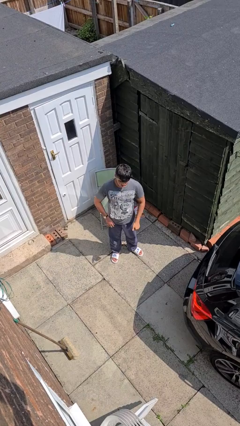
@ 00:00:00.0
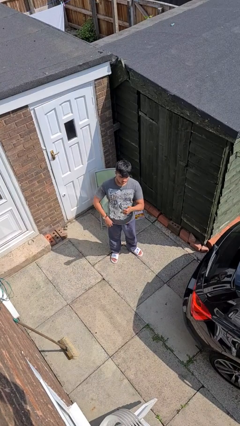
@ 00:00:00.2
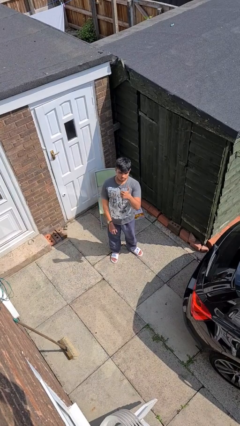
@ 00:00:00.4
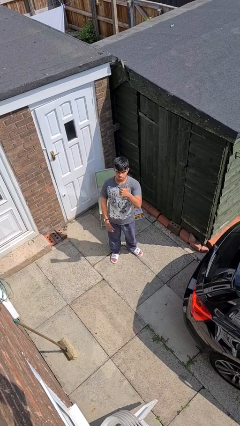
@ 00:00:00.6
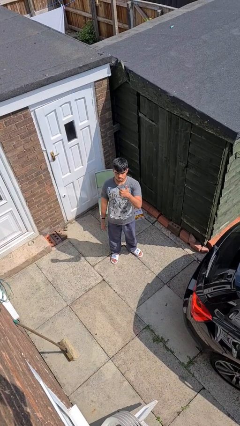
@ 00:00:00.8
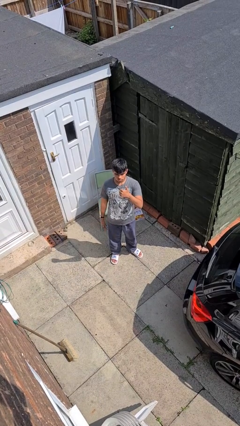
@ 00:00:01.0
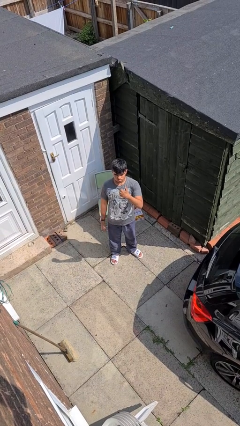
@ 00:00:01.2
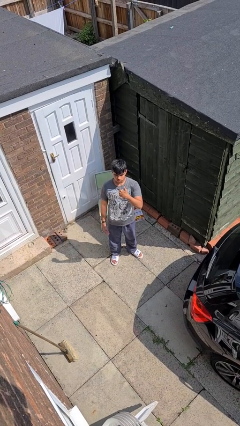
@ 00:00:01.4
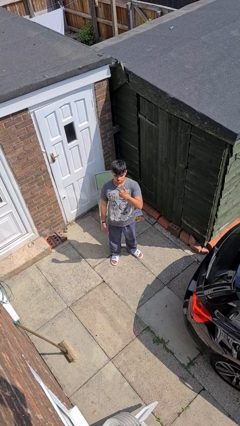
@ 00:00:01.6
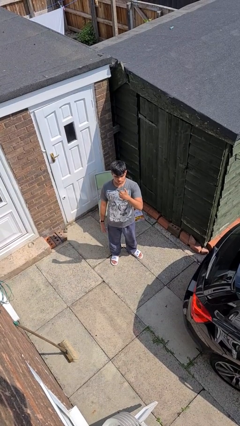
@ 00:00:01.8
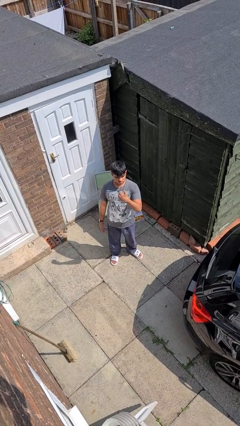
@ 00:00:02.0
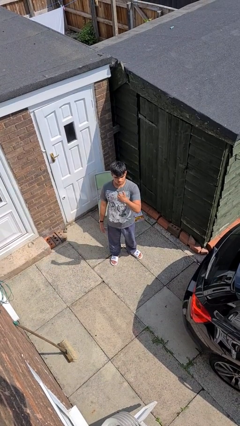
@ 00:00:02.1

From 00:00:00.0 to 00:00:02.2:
person gestures thumbs up

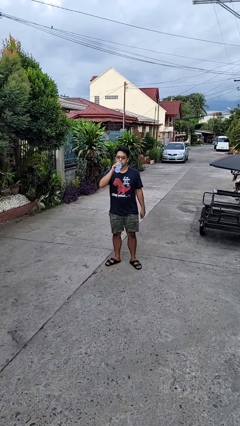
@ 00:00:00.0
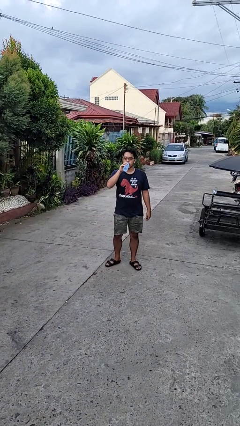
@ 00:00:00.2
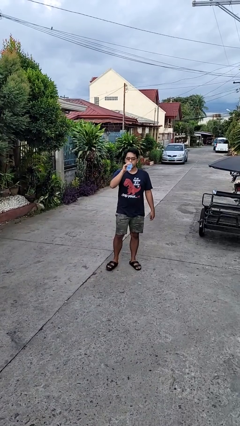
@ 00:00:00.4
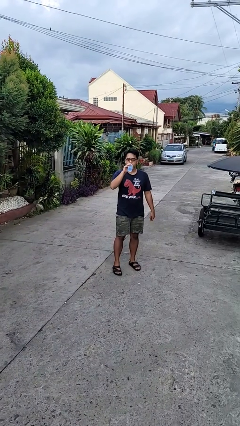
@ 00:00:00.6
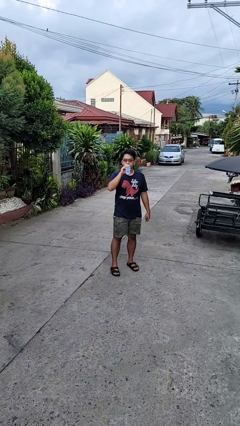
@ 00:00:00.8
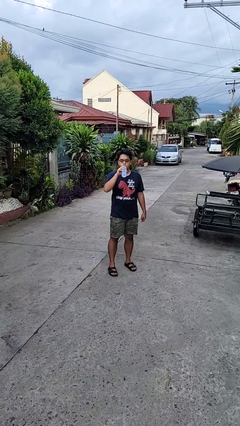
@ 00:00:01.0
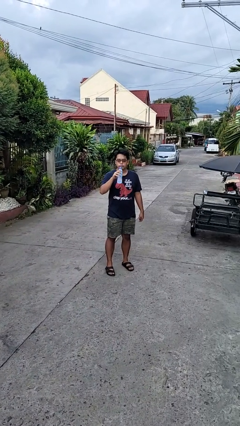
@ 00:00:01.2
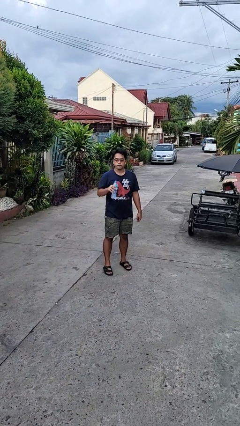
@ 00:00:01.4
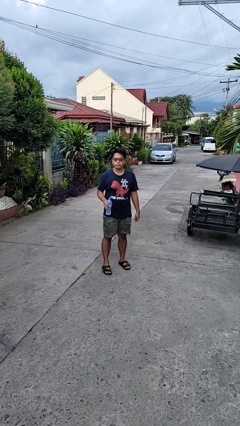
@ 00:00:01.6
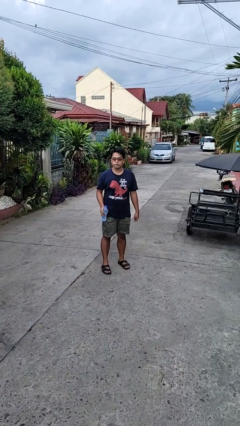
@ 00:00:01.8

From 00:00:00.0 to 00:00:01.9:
person drinks from bottle

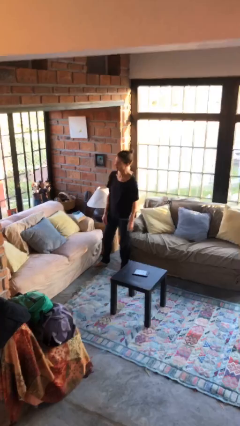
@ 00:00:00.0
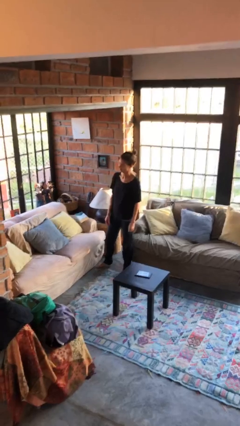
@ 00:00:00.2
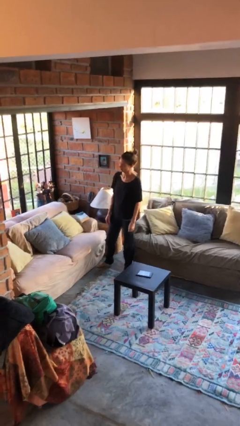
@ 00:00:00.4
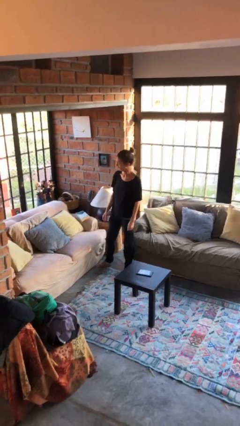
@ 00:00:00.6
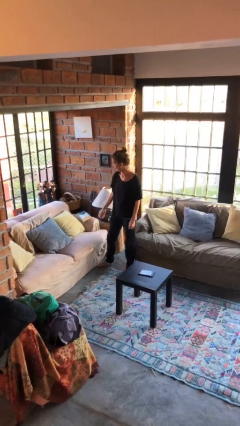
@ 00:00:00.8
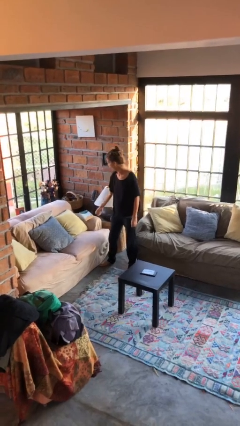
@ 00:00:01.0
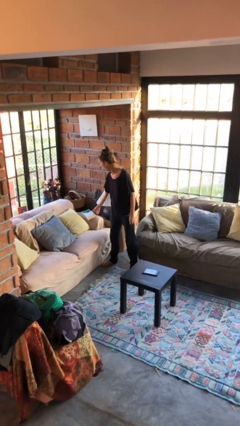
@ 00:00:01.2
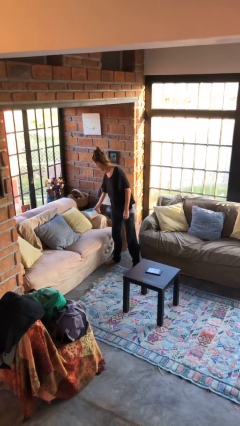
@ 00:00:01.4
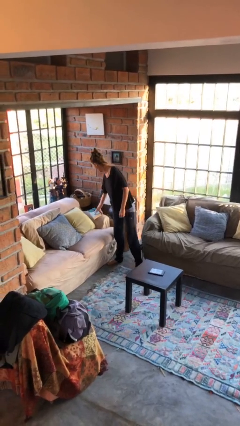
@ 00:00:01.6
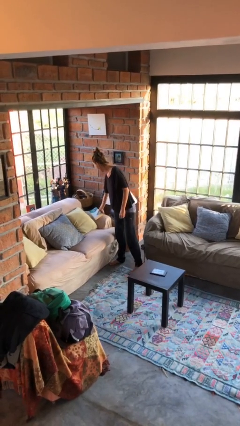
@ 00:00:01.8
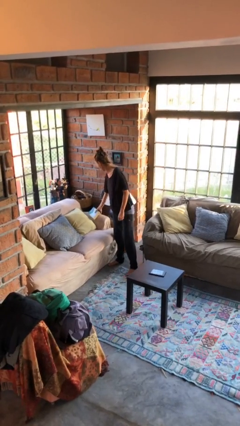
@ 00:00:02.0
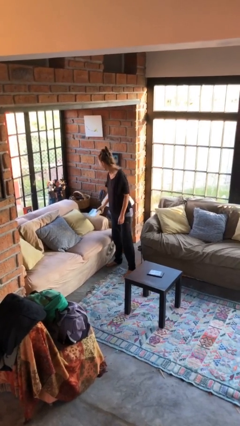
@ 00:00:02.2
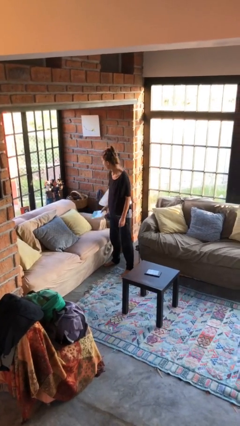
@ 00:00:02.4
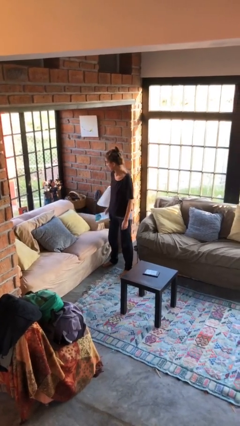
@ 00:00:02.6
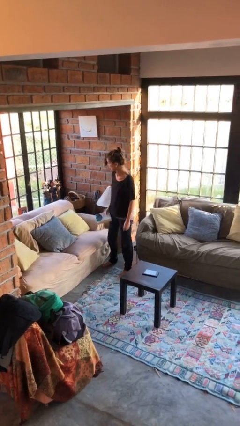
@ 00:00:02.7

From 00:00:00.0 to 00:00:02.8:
person picks up object from couch

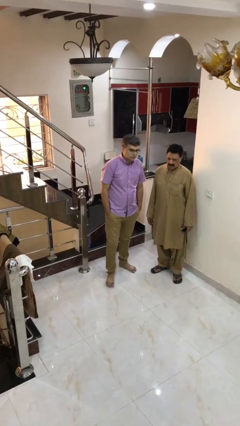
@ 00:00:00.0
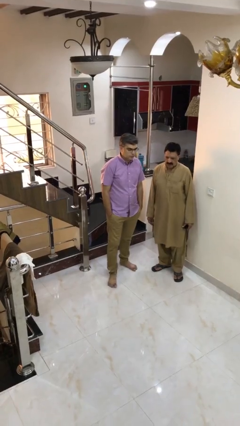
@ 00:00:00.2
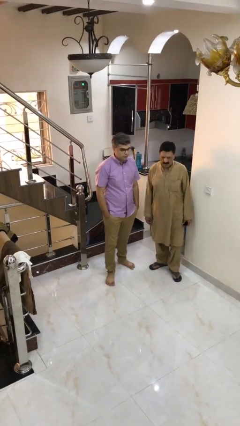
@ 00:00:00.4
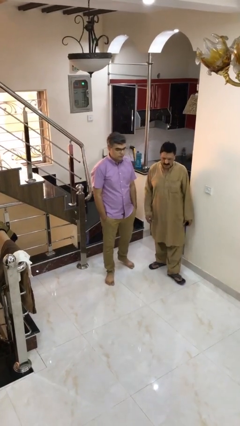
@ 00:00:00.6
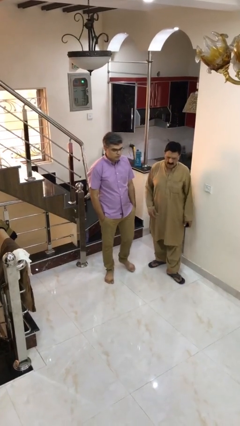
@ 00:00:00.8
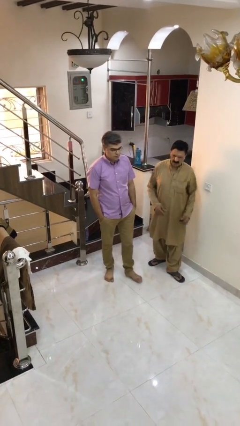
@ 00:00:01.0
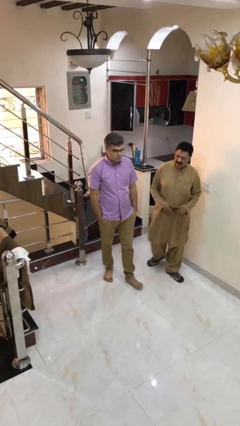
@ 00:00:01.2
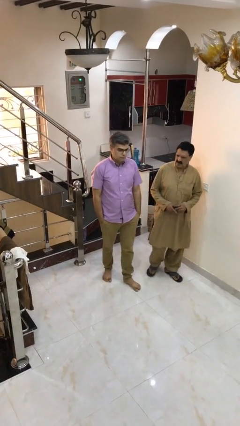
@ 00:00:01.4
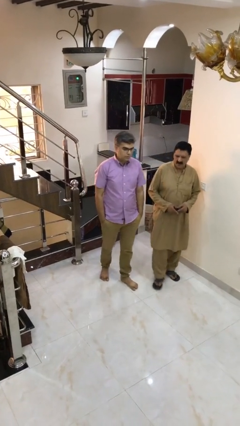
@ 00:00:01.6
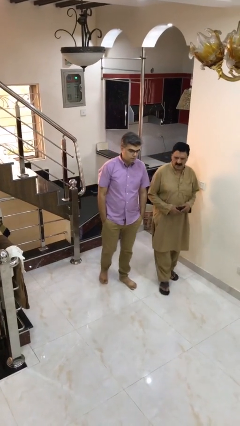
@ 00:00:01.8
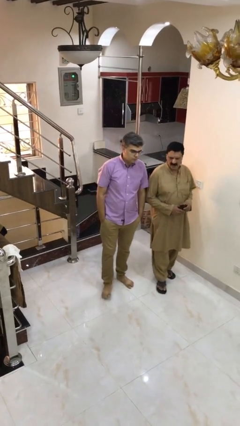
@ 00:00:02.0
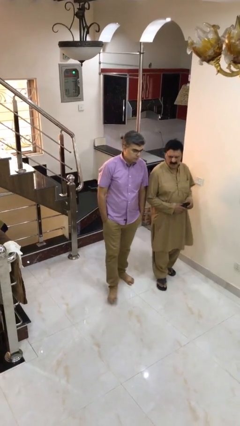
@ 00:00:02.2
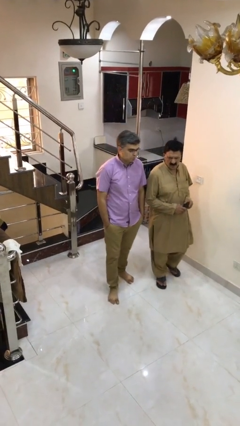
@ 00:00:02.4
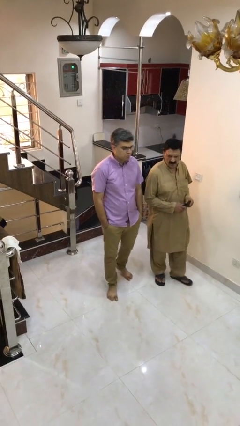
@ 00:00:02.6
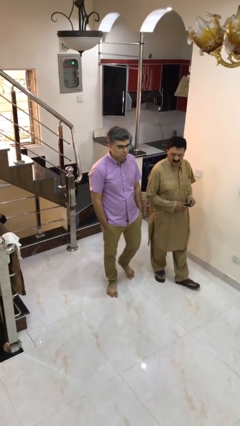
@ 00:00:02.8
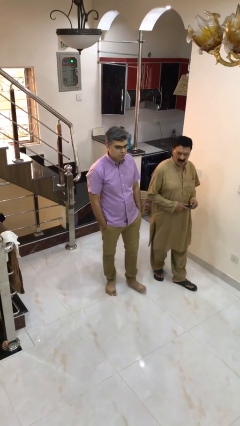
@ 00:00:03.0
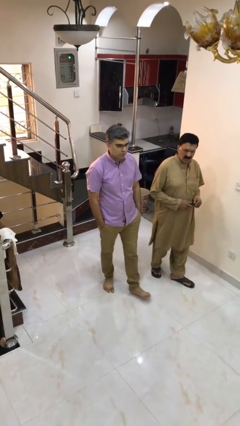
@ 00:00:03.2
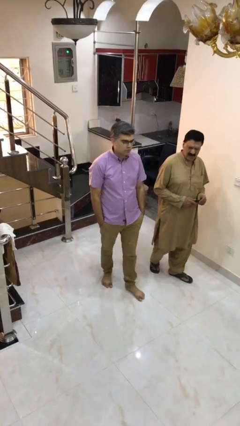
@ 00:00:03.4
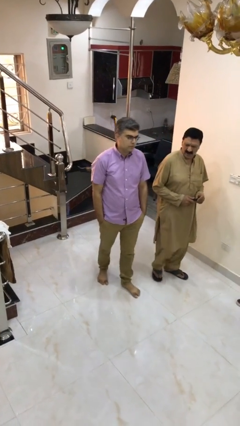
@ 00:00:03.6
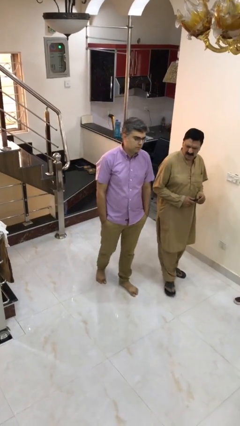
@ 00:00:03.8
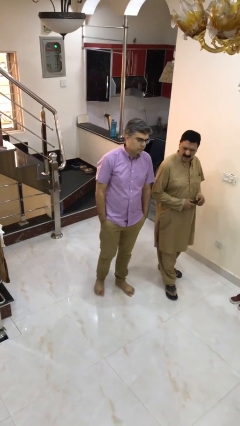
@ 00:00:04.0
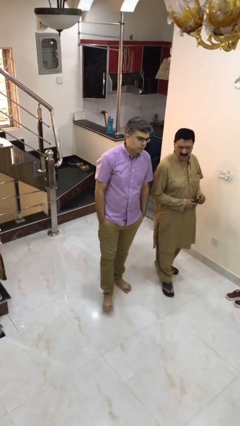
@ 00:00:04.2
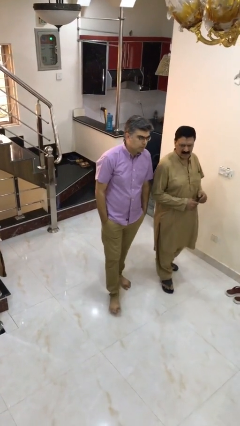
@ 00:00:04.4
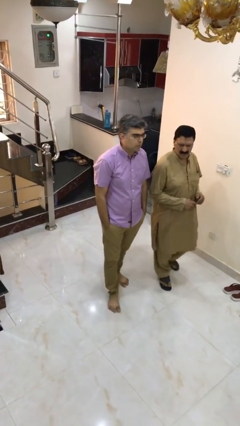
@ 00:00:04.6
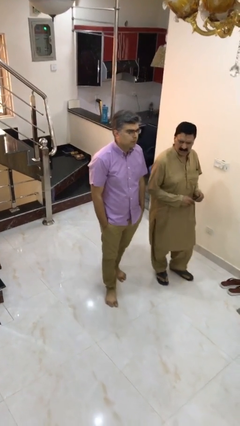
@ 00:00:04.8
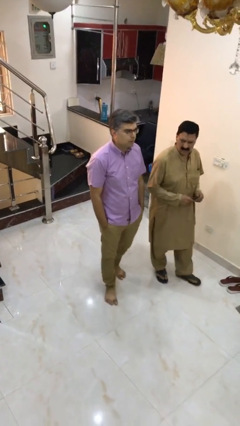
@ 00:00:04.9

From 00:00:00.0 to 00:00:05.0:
person talks to person

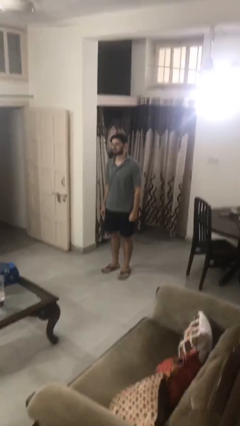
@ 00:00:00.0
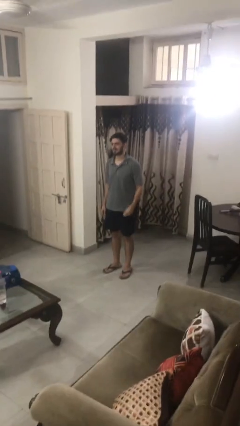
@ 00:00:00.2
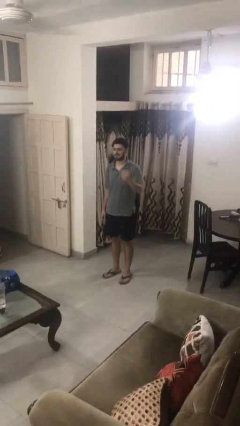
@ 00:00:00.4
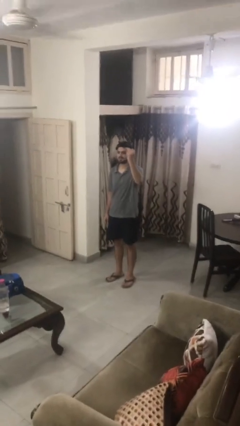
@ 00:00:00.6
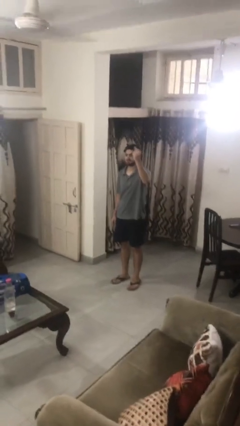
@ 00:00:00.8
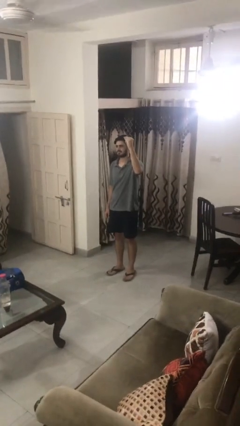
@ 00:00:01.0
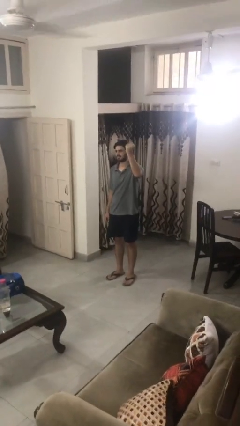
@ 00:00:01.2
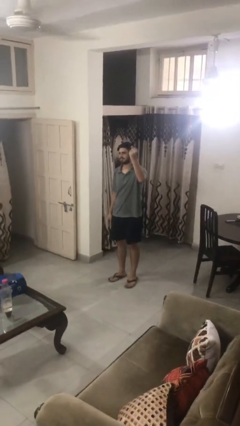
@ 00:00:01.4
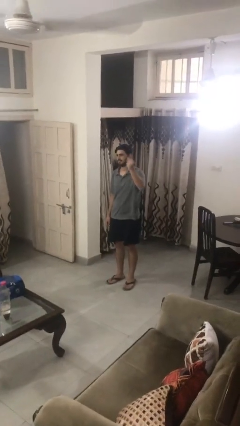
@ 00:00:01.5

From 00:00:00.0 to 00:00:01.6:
person snaps fingers

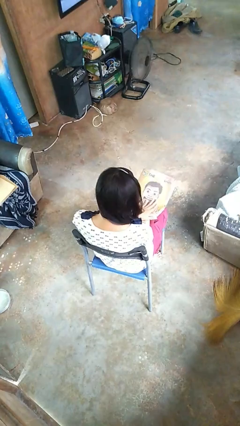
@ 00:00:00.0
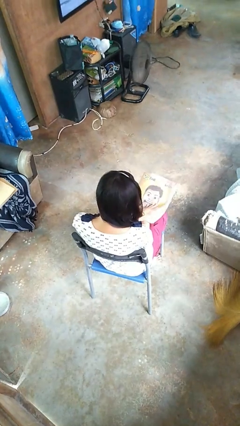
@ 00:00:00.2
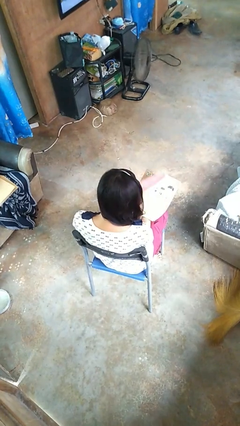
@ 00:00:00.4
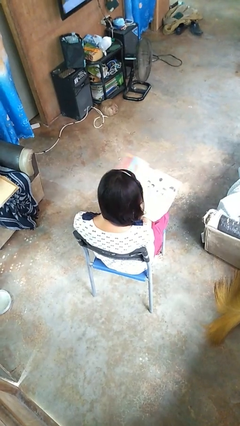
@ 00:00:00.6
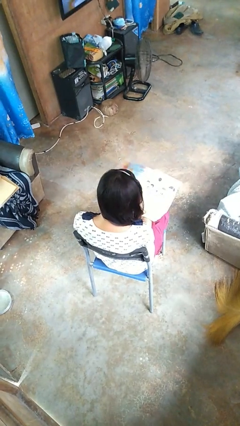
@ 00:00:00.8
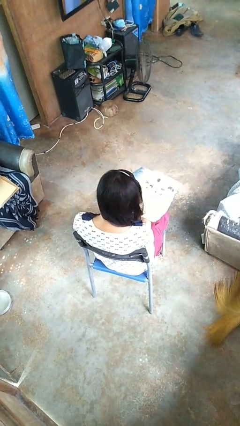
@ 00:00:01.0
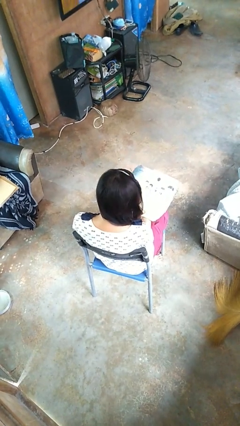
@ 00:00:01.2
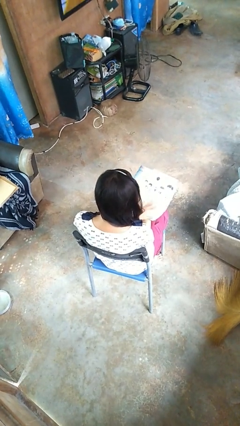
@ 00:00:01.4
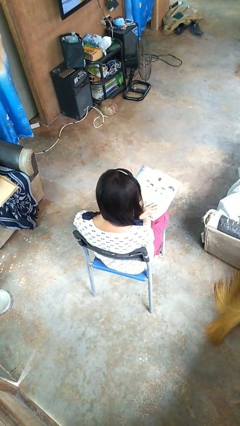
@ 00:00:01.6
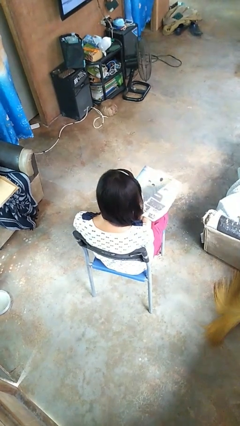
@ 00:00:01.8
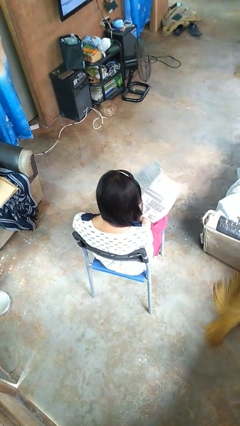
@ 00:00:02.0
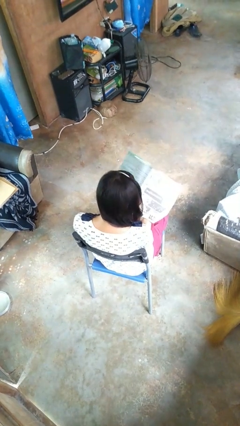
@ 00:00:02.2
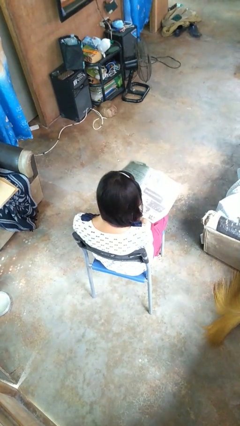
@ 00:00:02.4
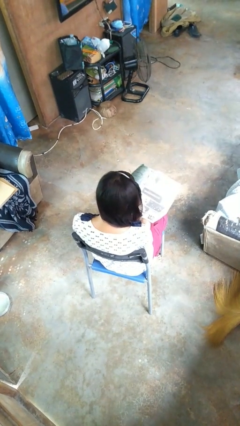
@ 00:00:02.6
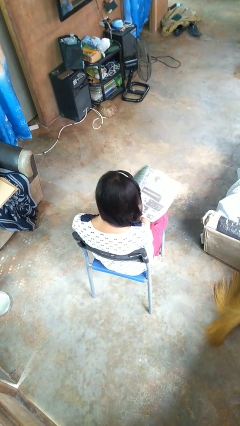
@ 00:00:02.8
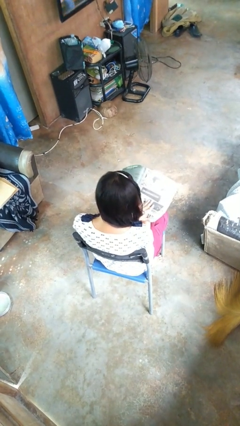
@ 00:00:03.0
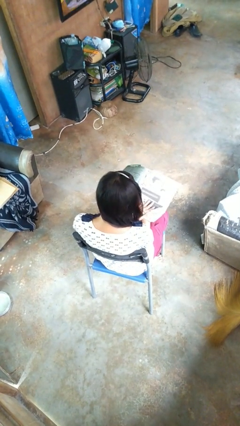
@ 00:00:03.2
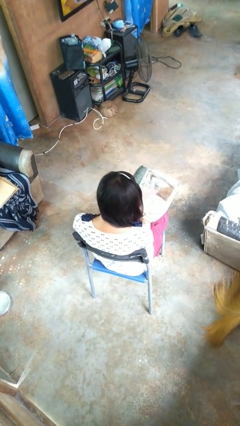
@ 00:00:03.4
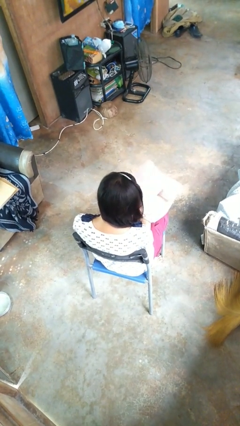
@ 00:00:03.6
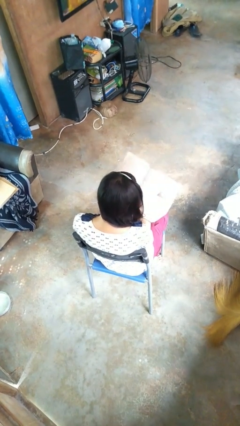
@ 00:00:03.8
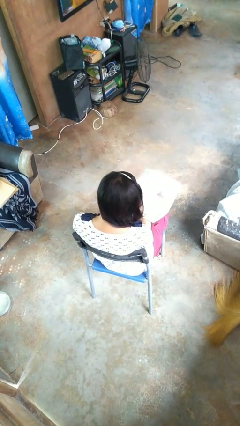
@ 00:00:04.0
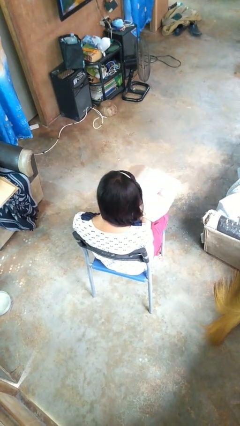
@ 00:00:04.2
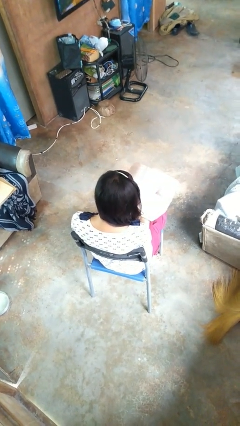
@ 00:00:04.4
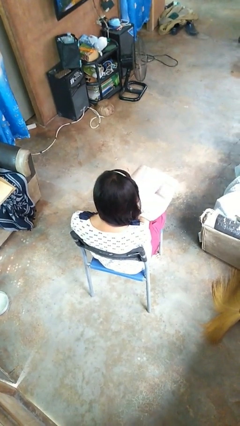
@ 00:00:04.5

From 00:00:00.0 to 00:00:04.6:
person reads magazine
